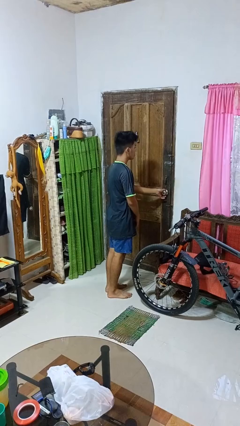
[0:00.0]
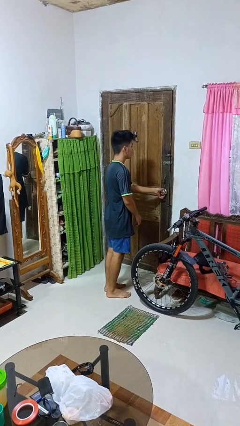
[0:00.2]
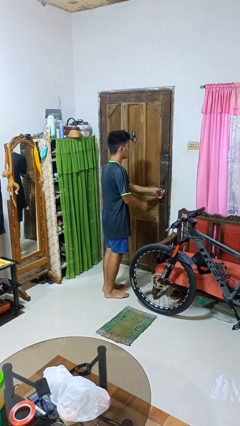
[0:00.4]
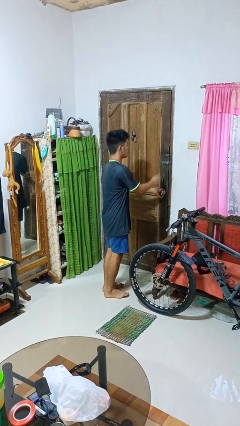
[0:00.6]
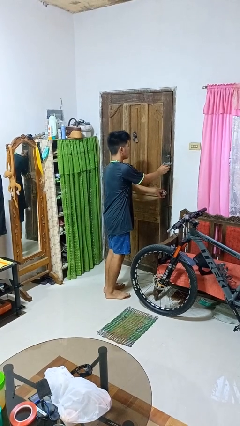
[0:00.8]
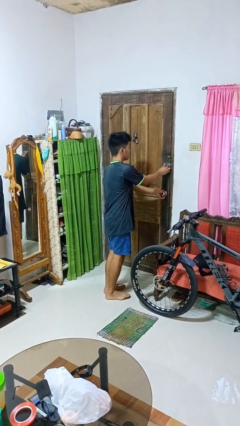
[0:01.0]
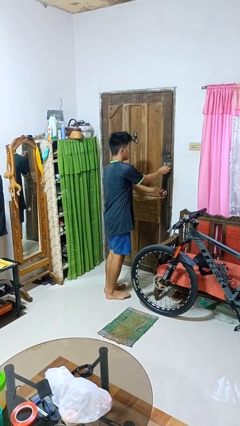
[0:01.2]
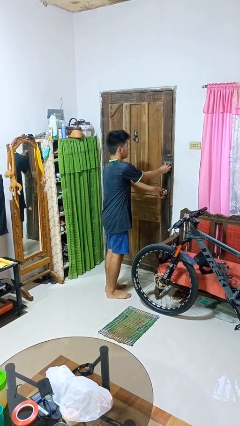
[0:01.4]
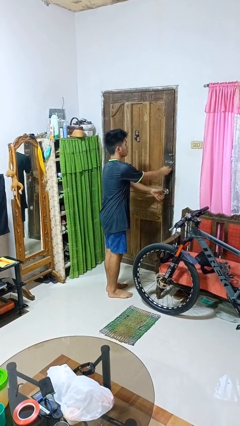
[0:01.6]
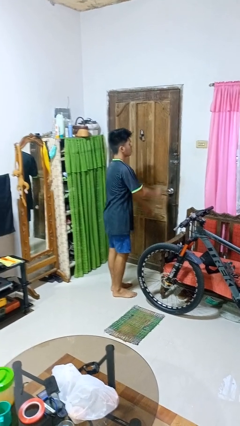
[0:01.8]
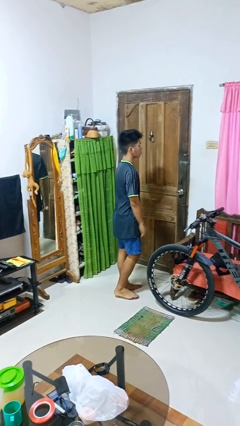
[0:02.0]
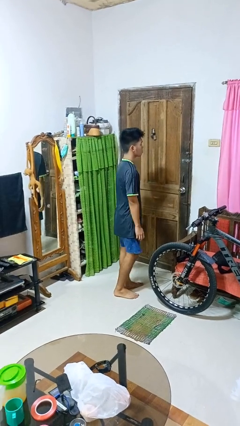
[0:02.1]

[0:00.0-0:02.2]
person locks door with keys

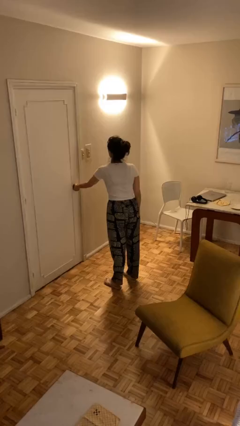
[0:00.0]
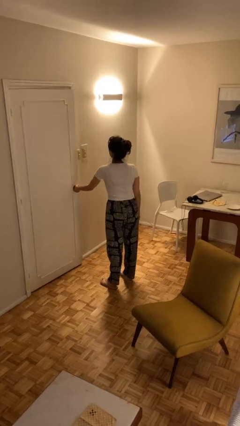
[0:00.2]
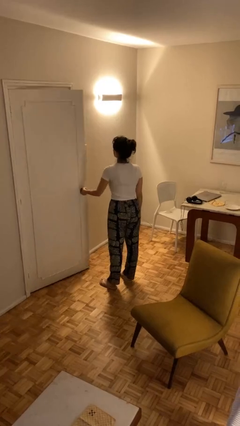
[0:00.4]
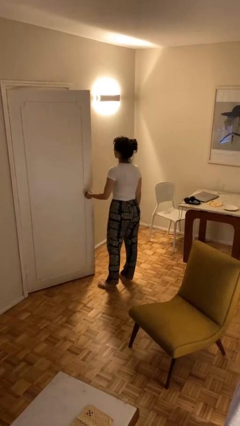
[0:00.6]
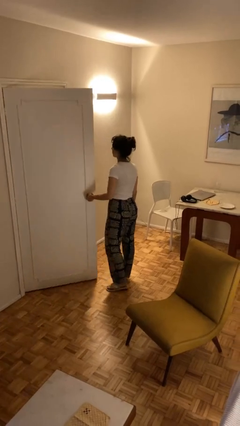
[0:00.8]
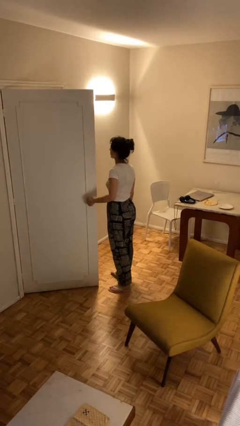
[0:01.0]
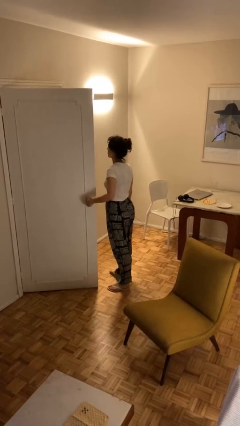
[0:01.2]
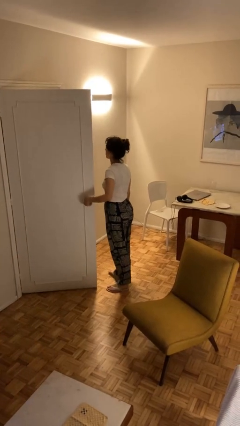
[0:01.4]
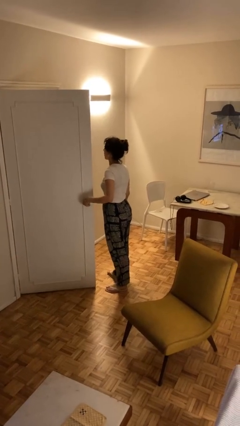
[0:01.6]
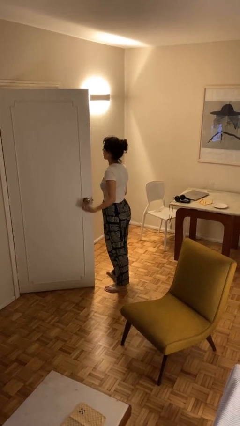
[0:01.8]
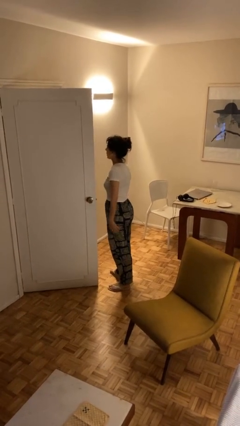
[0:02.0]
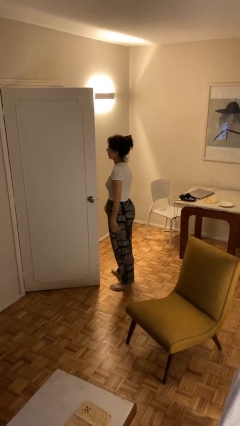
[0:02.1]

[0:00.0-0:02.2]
person opens facility door

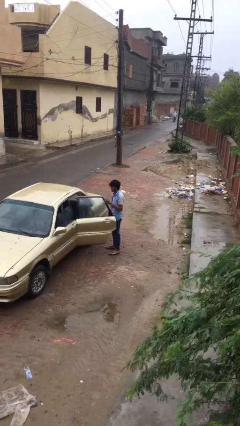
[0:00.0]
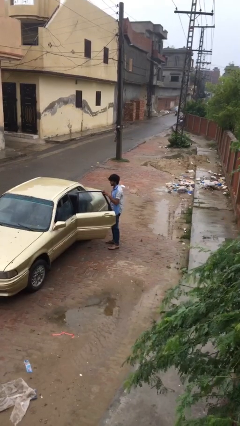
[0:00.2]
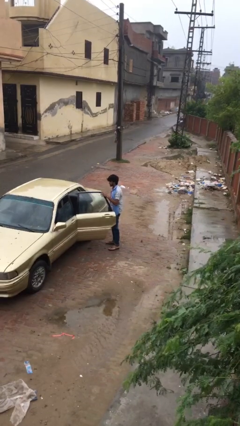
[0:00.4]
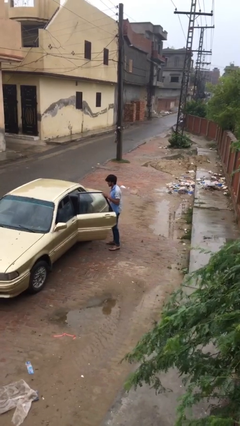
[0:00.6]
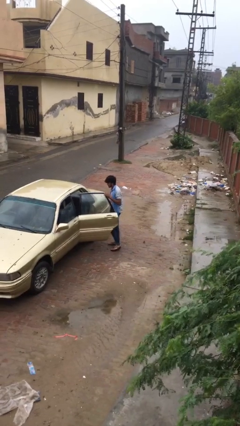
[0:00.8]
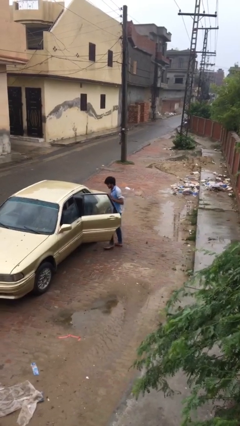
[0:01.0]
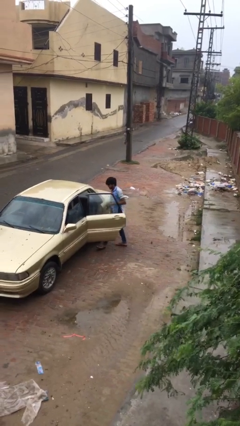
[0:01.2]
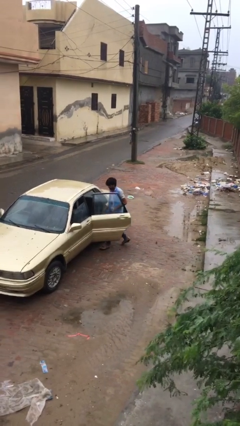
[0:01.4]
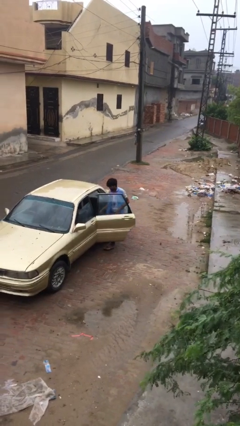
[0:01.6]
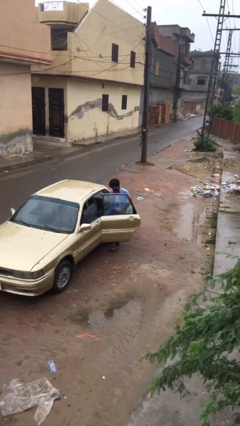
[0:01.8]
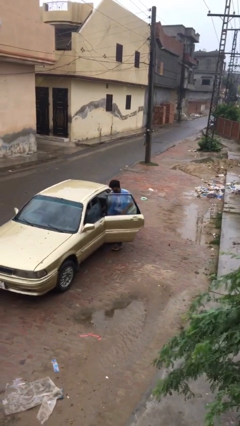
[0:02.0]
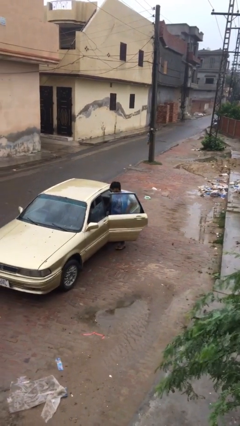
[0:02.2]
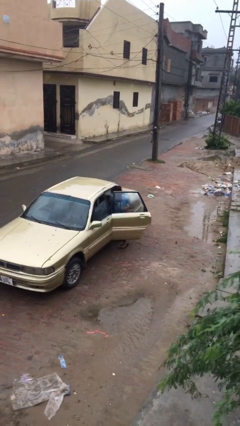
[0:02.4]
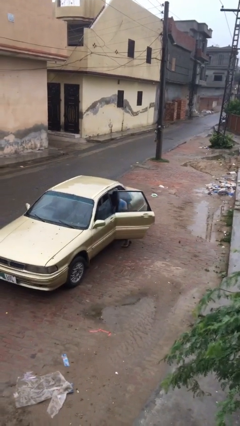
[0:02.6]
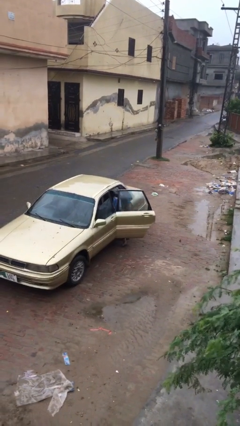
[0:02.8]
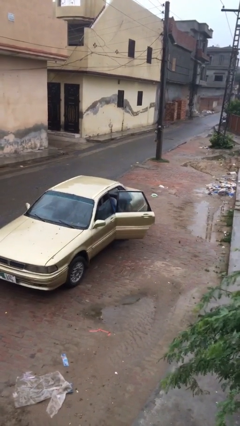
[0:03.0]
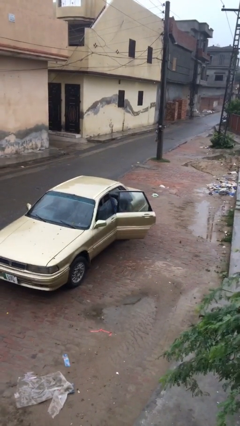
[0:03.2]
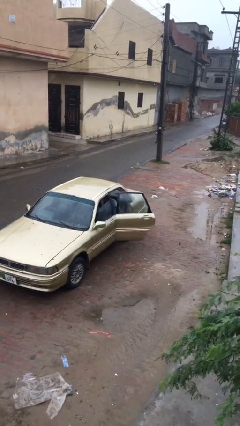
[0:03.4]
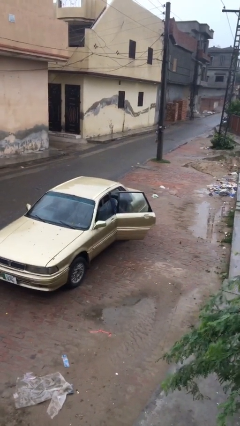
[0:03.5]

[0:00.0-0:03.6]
person enters car

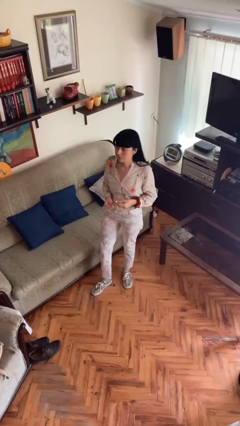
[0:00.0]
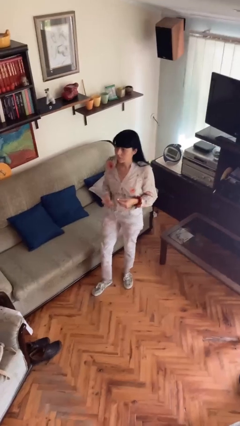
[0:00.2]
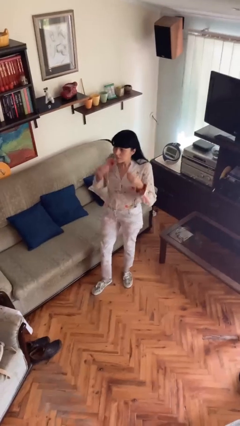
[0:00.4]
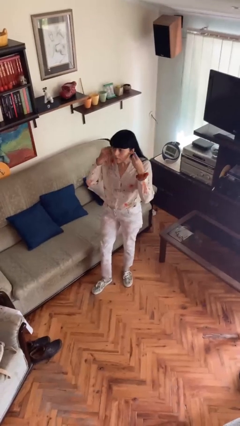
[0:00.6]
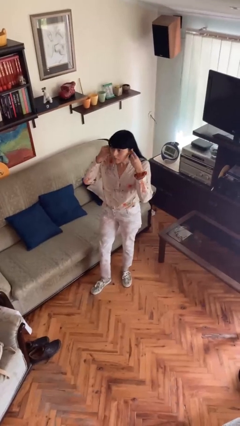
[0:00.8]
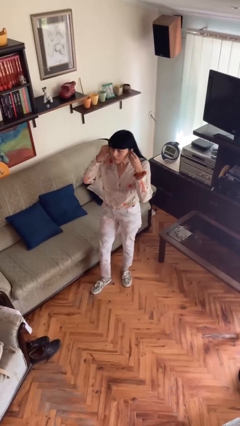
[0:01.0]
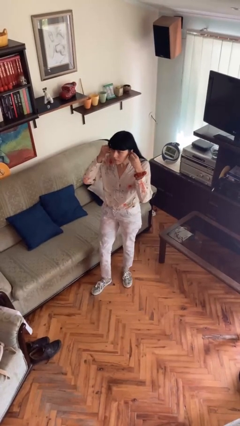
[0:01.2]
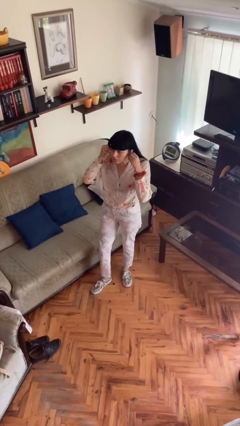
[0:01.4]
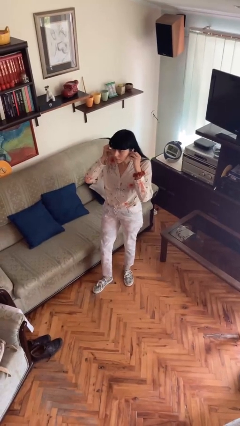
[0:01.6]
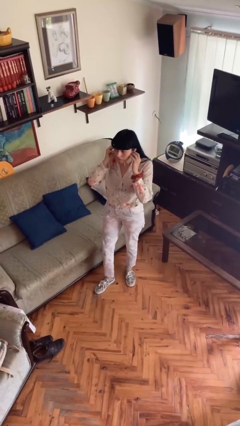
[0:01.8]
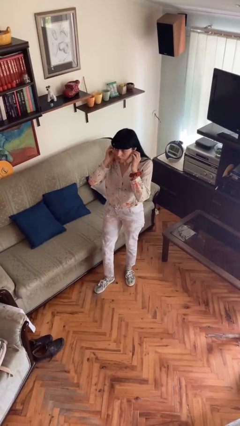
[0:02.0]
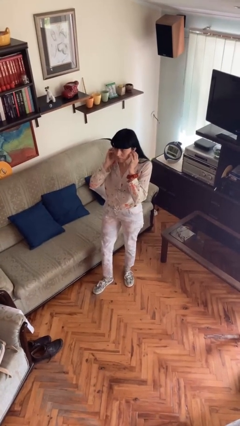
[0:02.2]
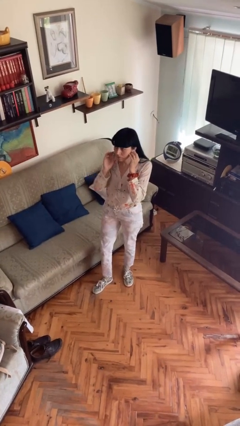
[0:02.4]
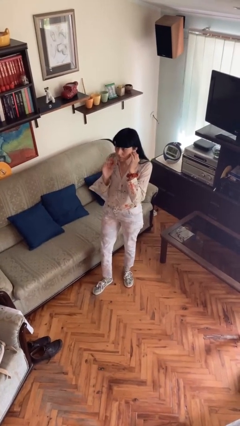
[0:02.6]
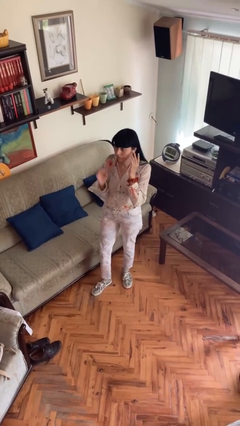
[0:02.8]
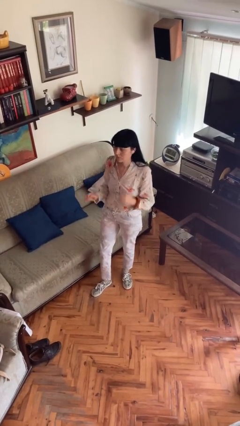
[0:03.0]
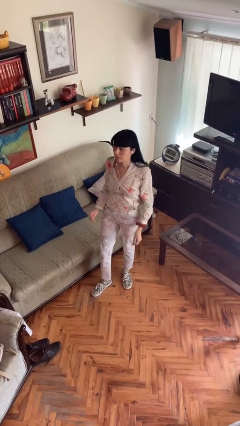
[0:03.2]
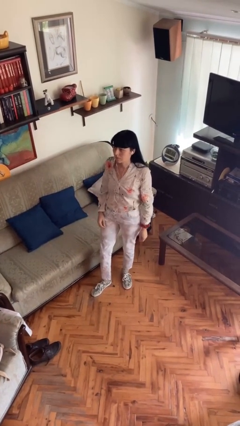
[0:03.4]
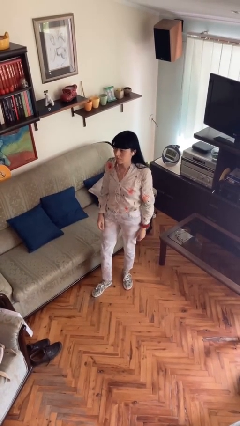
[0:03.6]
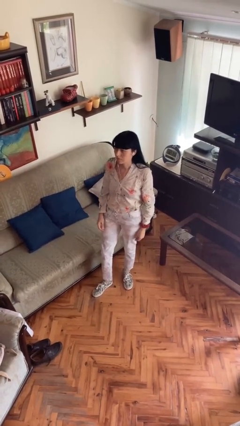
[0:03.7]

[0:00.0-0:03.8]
person puts on headphones

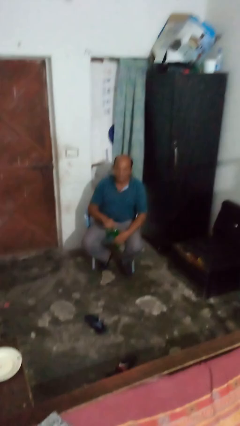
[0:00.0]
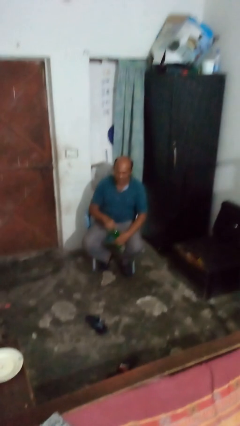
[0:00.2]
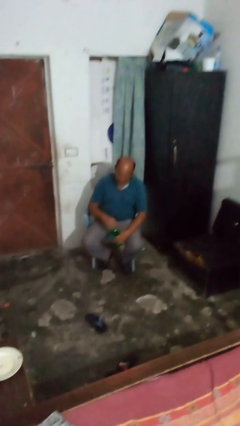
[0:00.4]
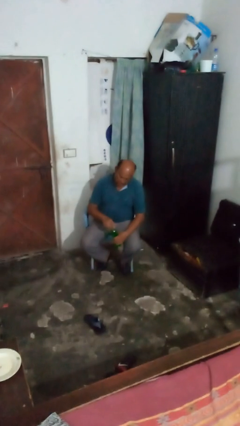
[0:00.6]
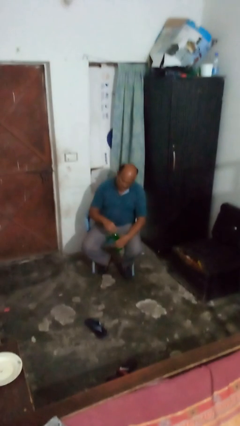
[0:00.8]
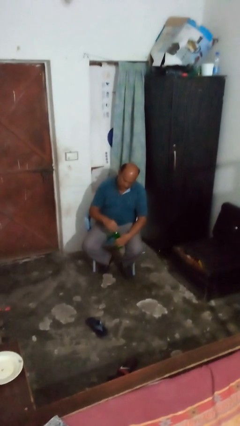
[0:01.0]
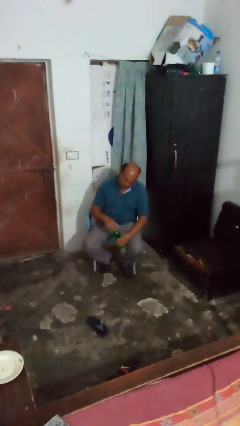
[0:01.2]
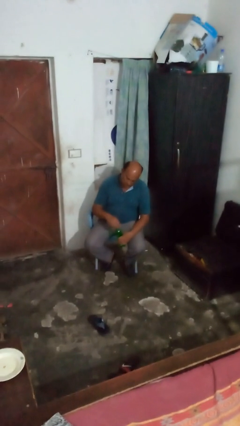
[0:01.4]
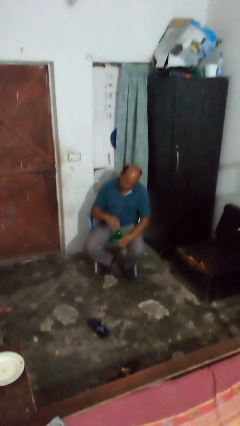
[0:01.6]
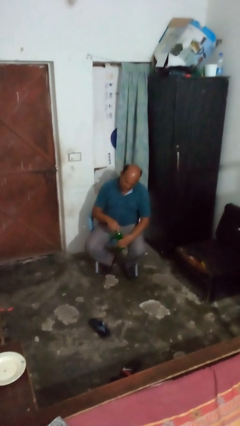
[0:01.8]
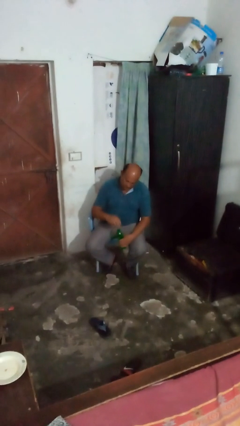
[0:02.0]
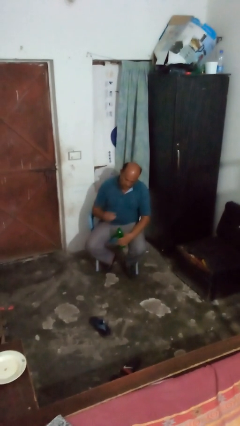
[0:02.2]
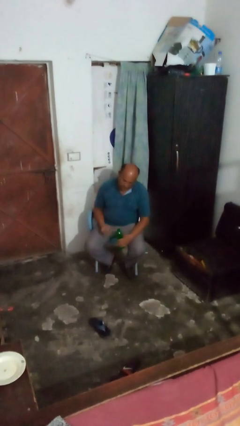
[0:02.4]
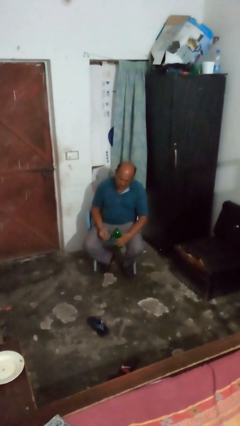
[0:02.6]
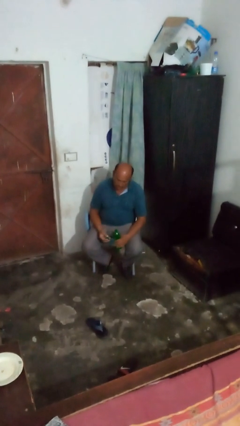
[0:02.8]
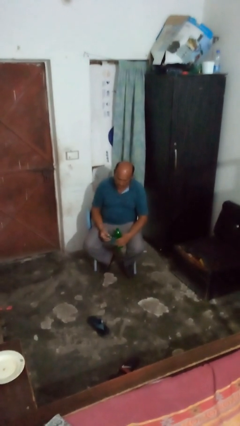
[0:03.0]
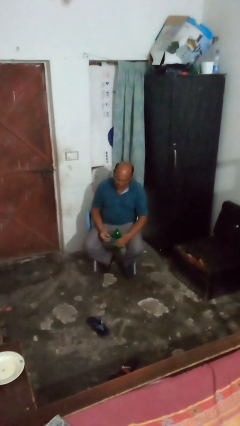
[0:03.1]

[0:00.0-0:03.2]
person unscrews lid from bottle

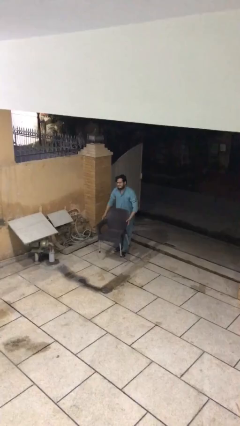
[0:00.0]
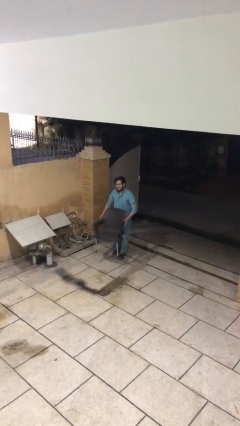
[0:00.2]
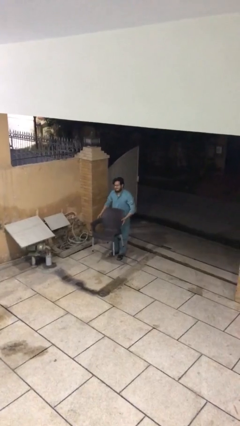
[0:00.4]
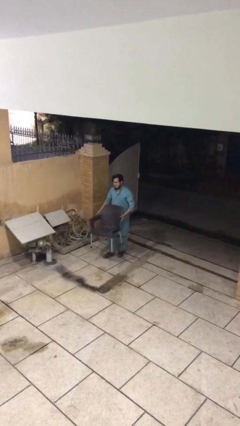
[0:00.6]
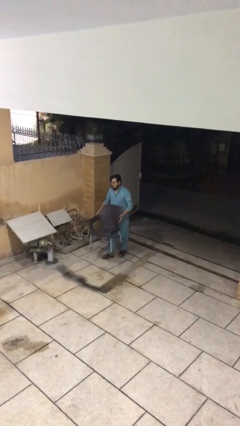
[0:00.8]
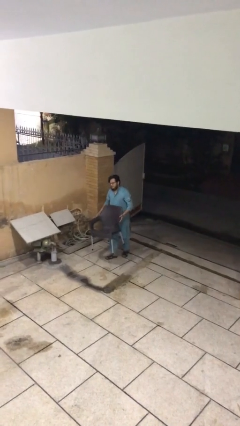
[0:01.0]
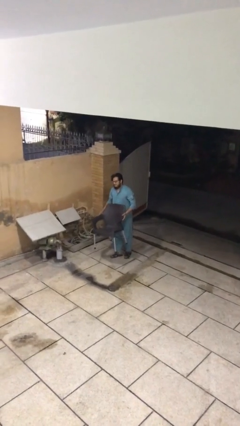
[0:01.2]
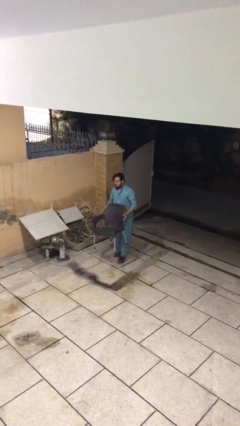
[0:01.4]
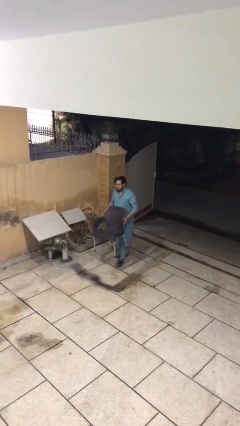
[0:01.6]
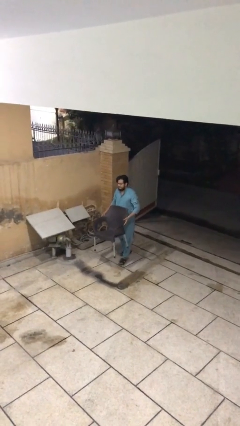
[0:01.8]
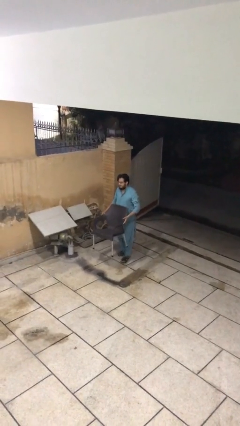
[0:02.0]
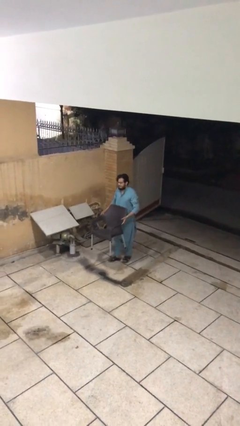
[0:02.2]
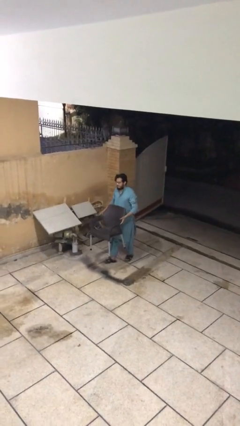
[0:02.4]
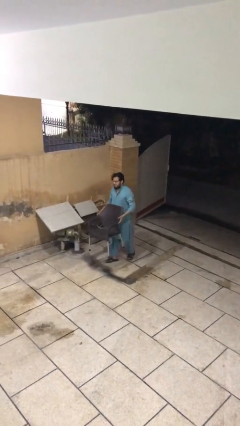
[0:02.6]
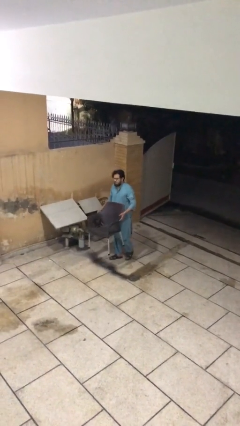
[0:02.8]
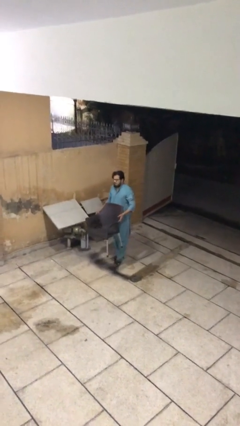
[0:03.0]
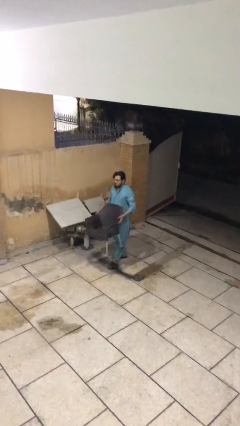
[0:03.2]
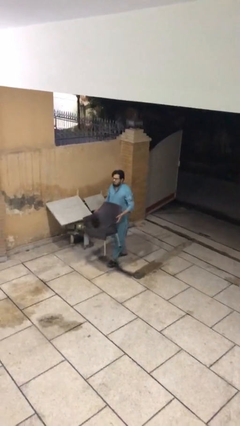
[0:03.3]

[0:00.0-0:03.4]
person carries heavy object
